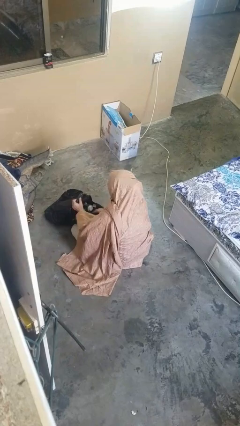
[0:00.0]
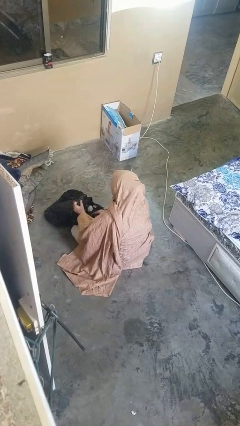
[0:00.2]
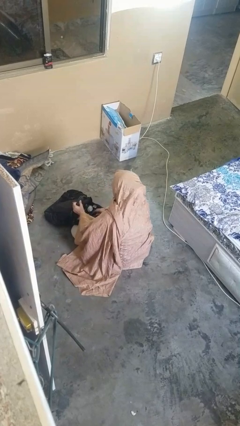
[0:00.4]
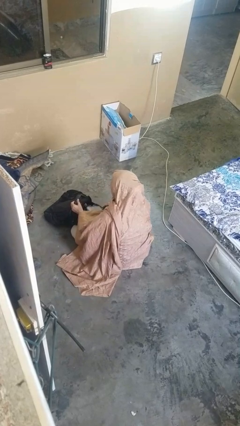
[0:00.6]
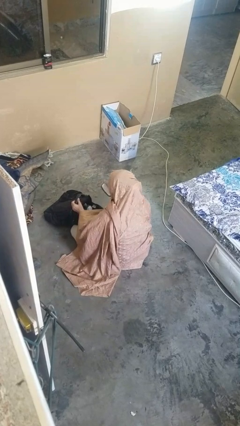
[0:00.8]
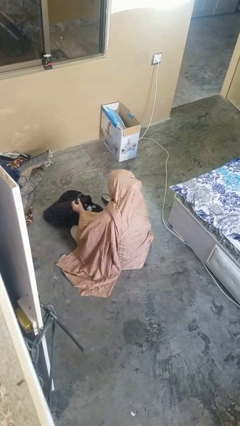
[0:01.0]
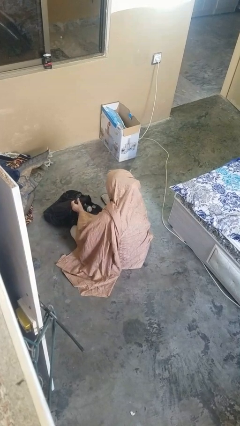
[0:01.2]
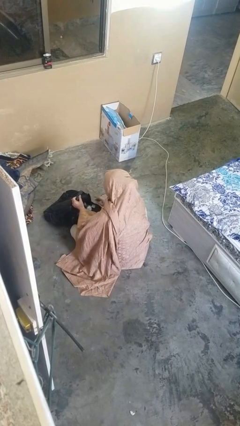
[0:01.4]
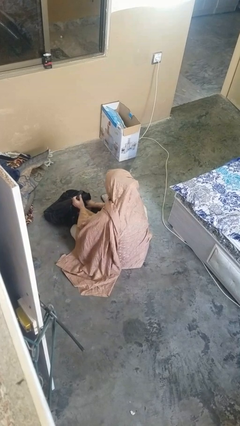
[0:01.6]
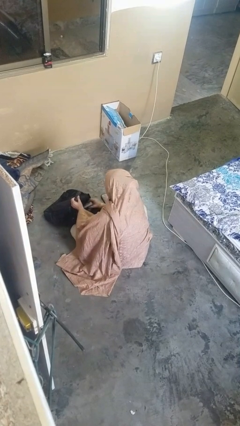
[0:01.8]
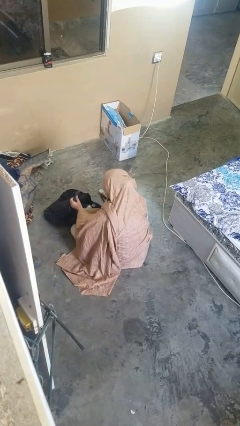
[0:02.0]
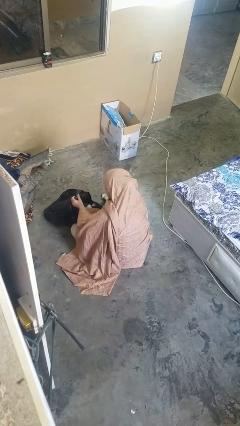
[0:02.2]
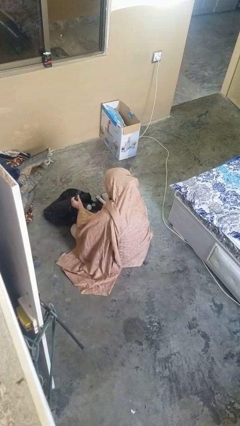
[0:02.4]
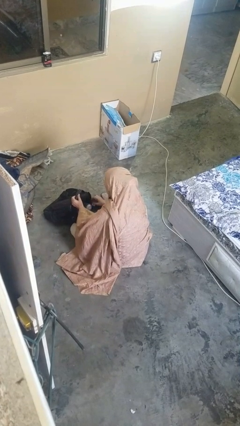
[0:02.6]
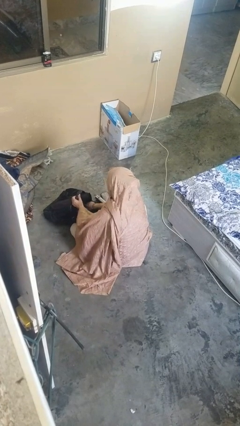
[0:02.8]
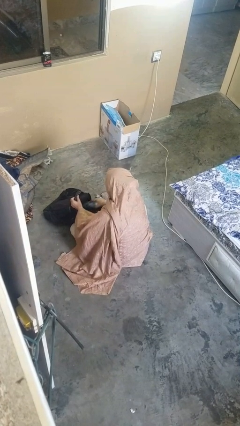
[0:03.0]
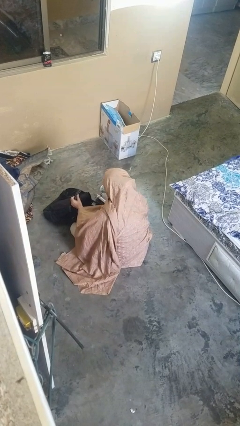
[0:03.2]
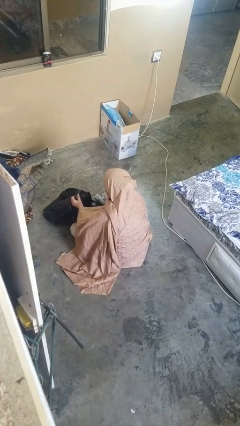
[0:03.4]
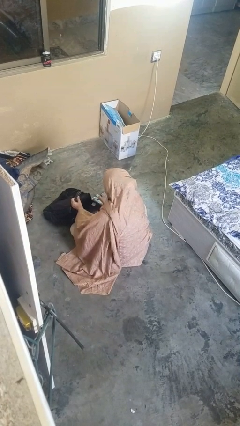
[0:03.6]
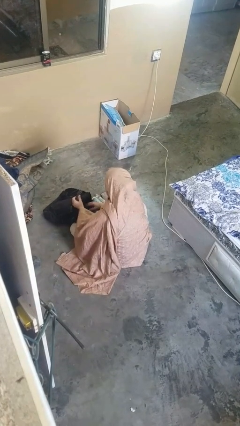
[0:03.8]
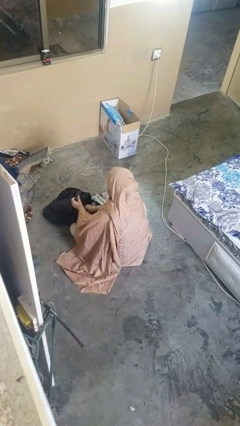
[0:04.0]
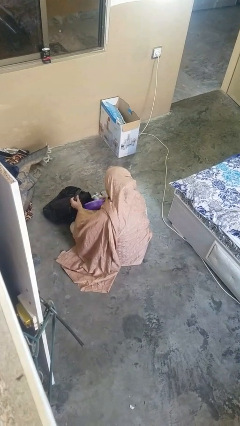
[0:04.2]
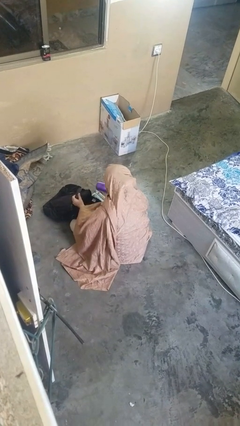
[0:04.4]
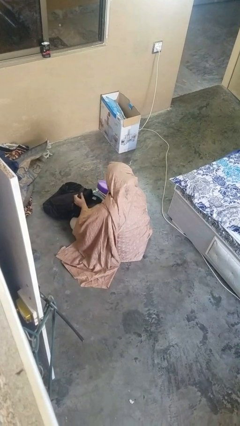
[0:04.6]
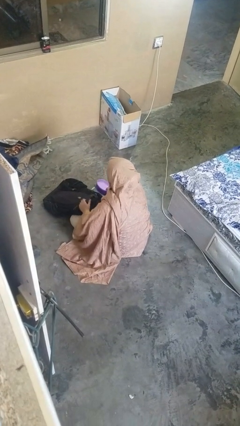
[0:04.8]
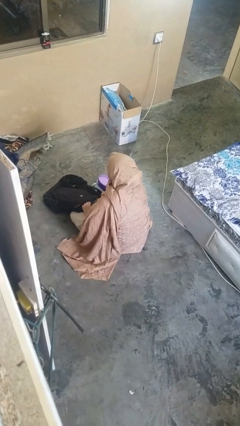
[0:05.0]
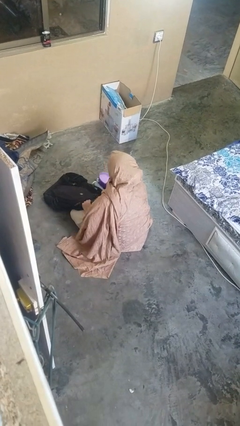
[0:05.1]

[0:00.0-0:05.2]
person takes object from backpack

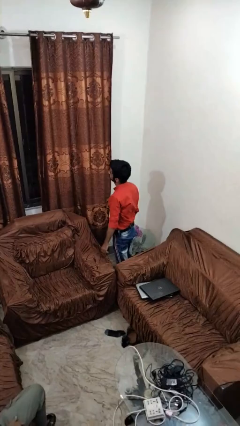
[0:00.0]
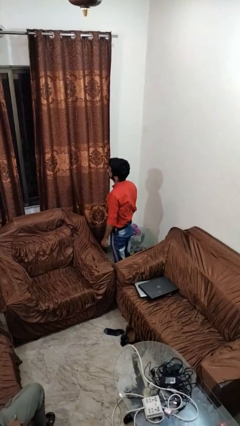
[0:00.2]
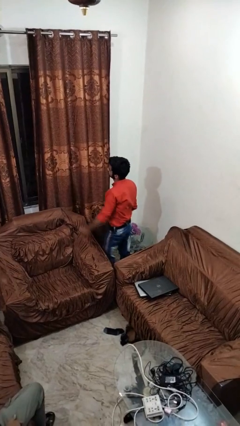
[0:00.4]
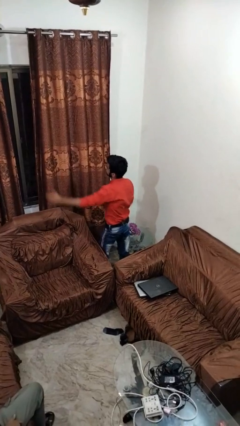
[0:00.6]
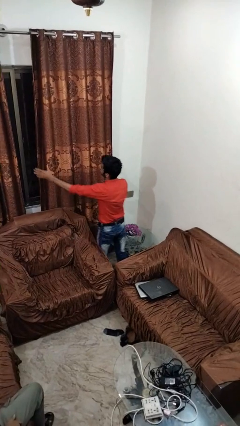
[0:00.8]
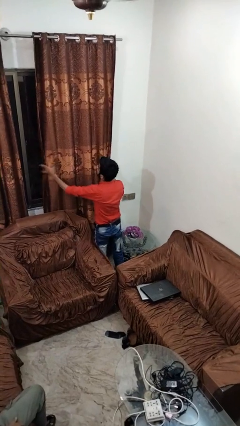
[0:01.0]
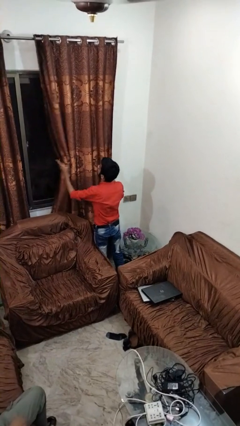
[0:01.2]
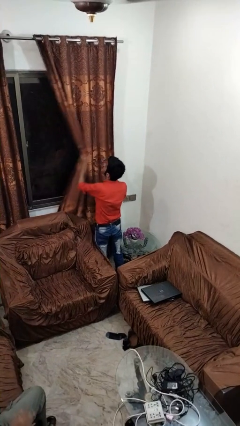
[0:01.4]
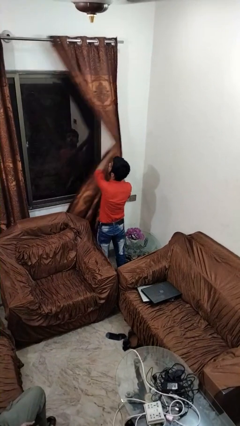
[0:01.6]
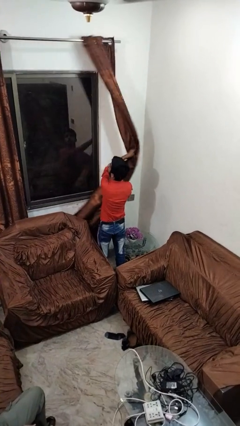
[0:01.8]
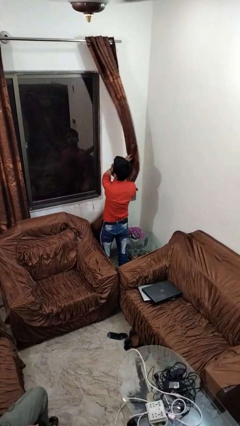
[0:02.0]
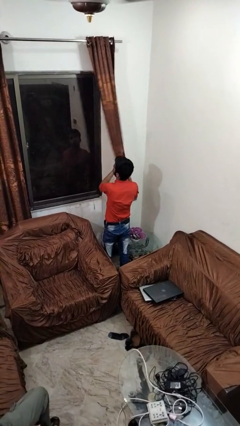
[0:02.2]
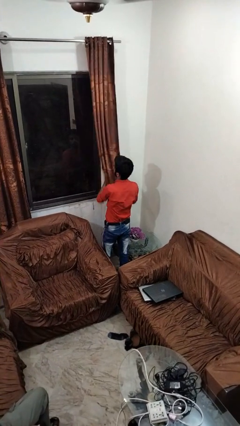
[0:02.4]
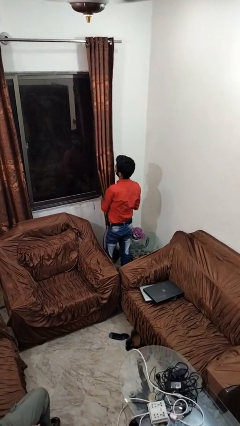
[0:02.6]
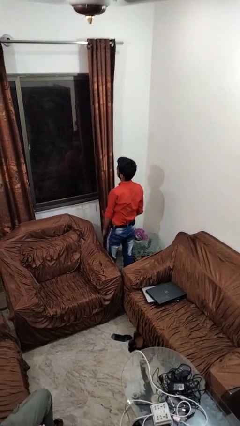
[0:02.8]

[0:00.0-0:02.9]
person opens curtains

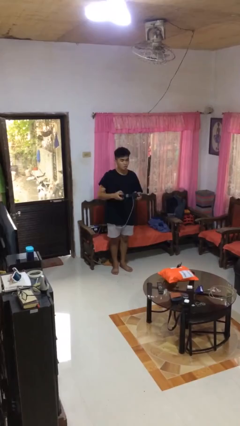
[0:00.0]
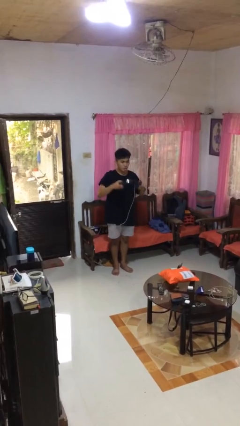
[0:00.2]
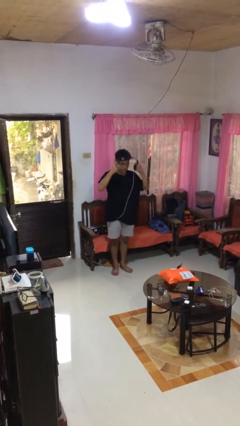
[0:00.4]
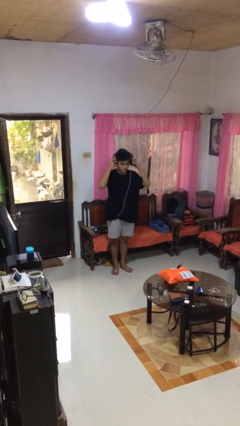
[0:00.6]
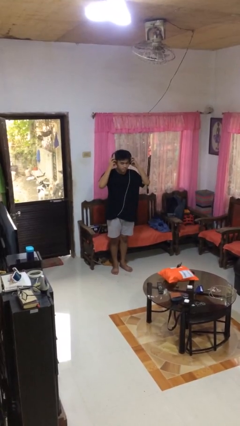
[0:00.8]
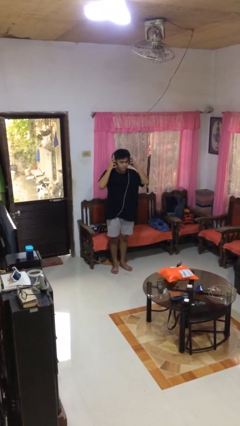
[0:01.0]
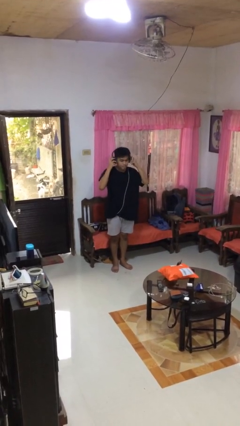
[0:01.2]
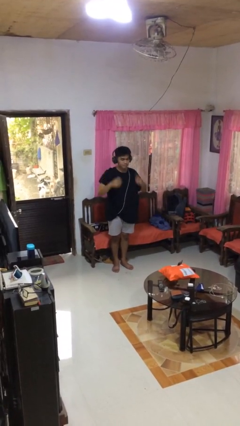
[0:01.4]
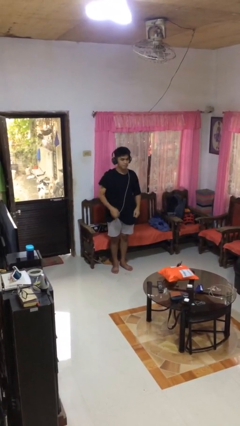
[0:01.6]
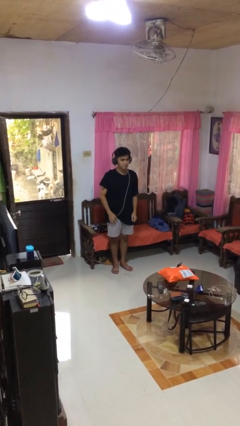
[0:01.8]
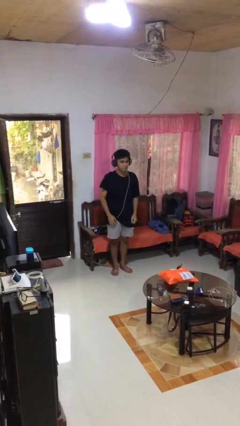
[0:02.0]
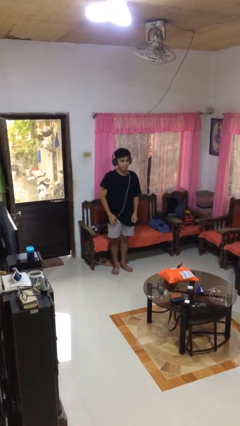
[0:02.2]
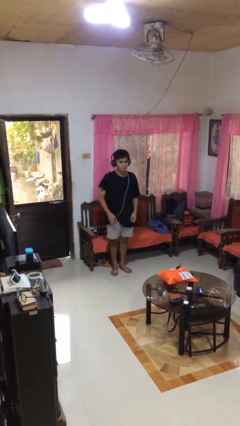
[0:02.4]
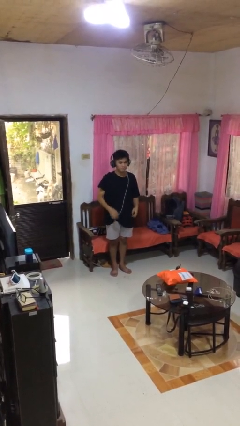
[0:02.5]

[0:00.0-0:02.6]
person puts on headphones

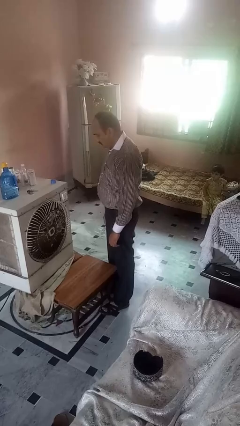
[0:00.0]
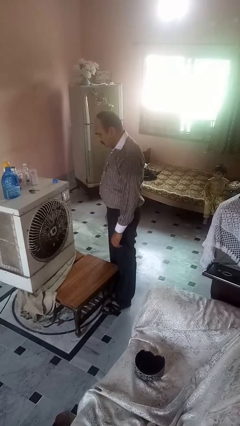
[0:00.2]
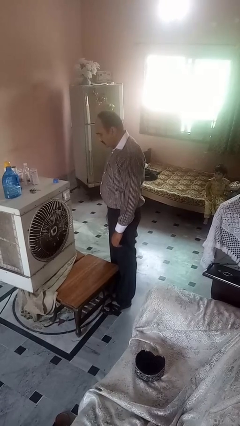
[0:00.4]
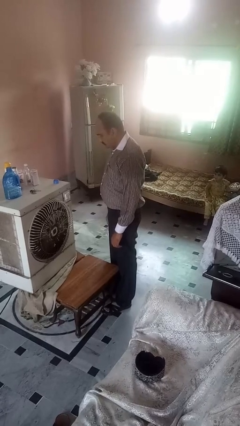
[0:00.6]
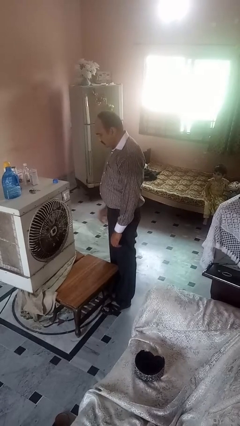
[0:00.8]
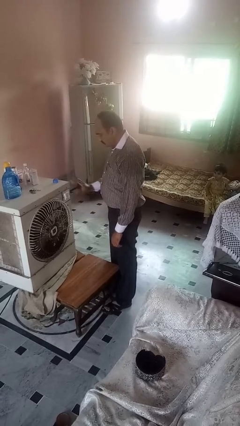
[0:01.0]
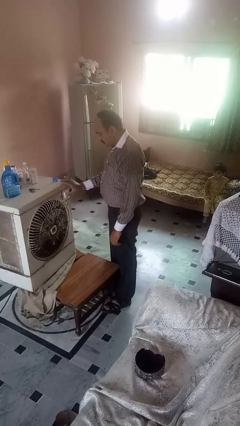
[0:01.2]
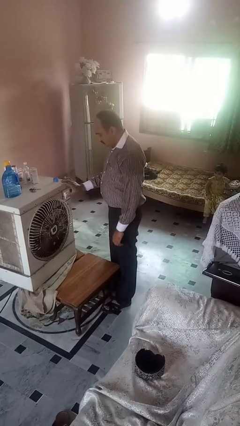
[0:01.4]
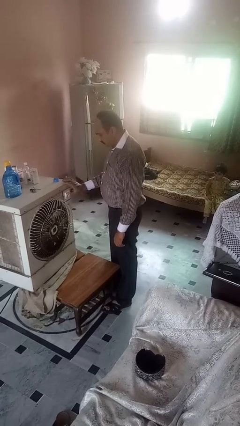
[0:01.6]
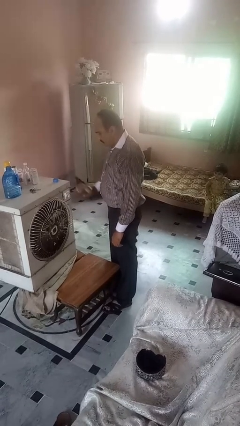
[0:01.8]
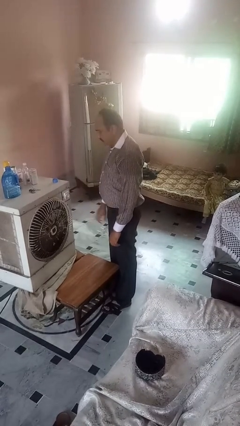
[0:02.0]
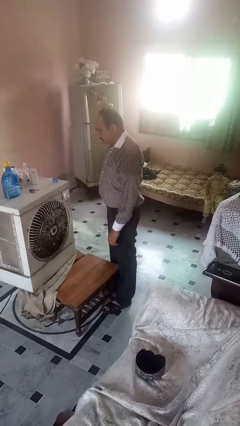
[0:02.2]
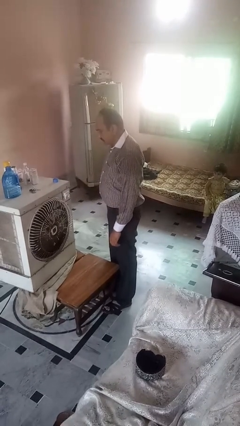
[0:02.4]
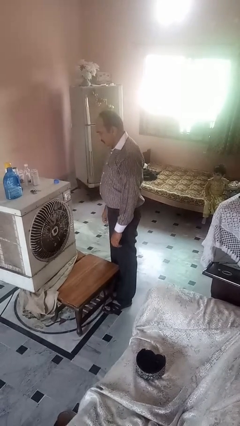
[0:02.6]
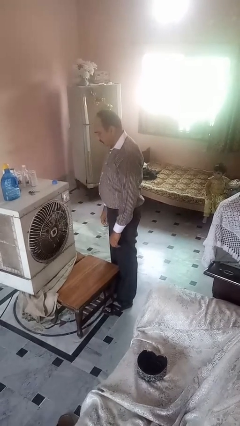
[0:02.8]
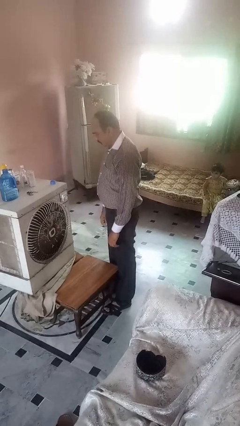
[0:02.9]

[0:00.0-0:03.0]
person turns on fan

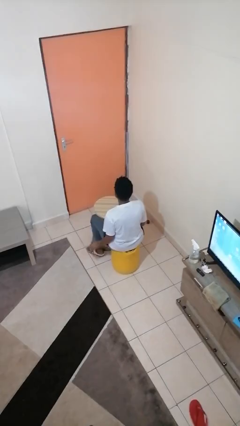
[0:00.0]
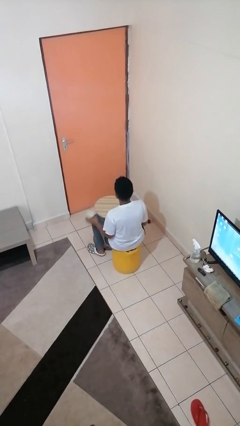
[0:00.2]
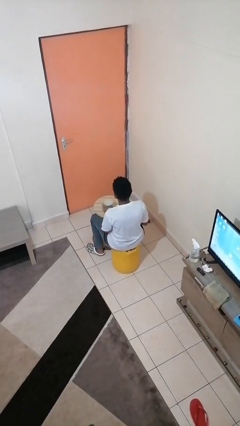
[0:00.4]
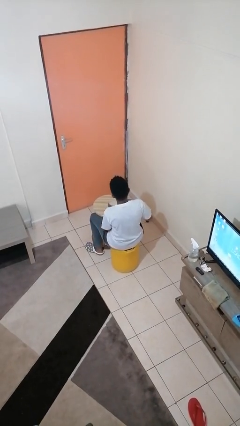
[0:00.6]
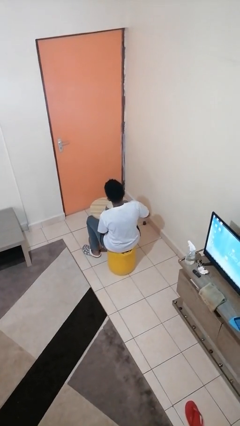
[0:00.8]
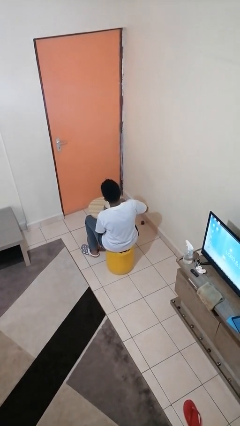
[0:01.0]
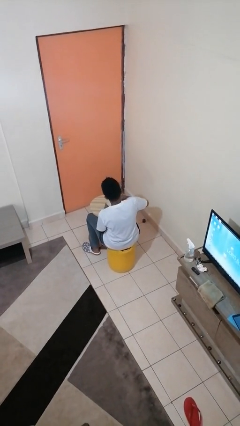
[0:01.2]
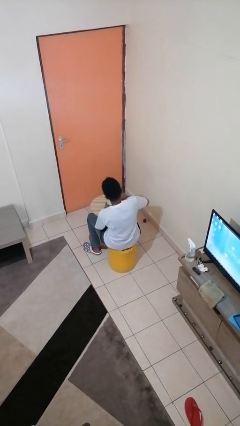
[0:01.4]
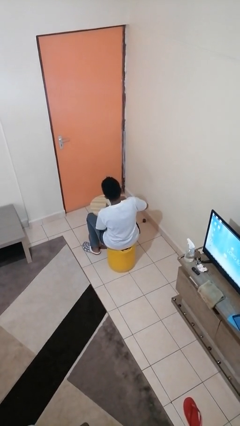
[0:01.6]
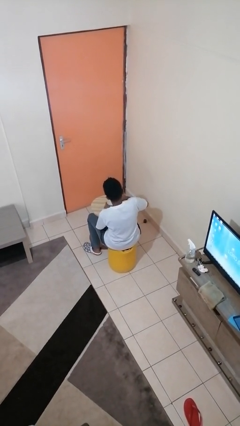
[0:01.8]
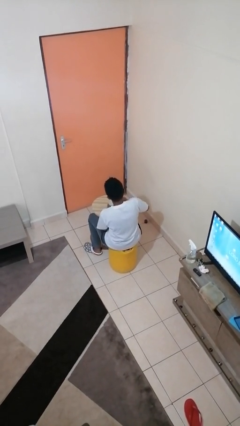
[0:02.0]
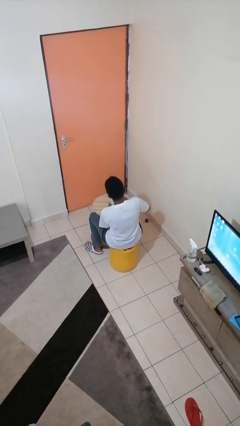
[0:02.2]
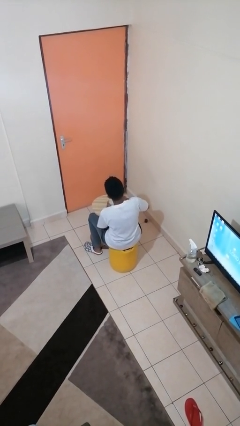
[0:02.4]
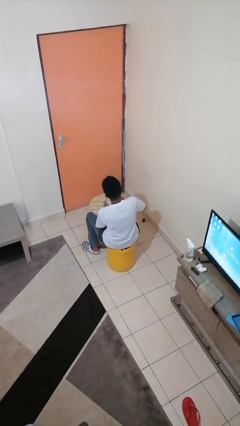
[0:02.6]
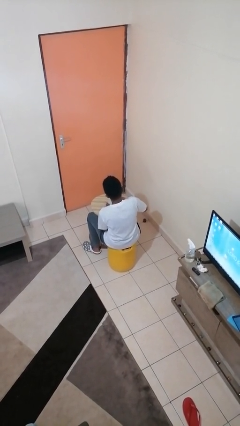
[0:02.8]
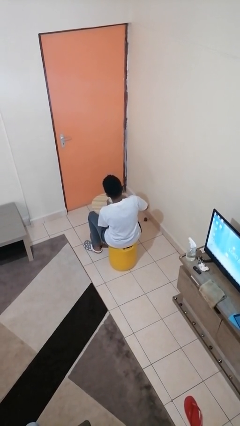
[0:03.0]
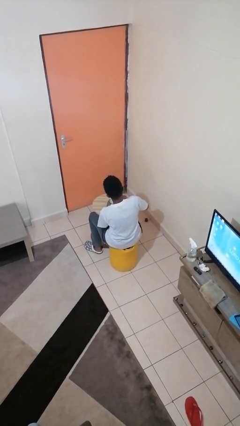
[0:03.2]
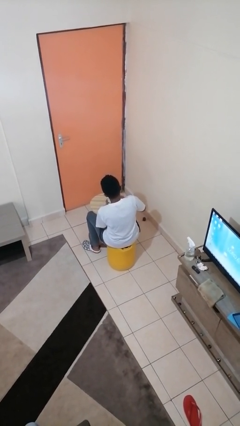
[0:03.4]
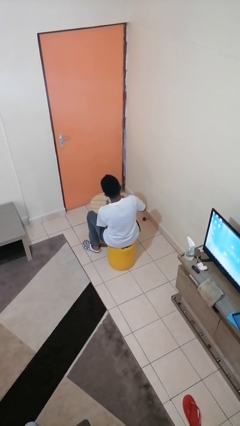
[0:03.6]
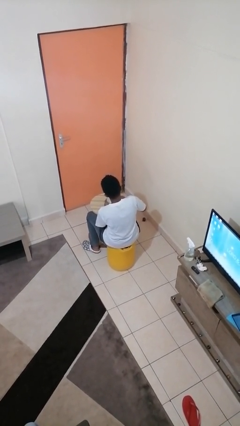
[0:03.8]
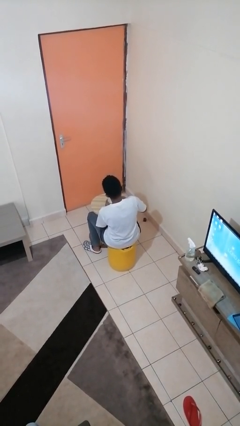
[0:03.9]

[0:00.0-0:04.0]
person opens can with can opener
